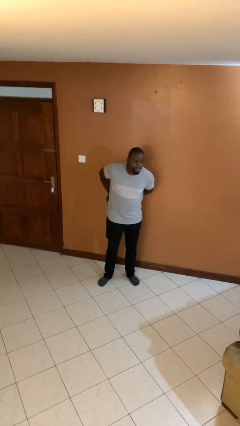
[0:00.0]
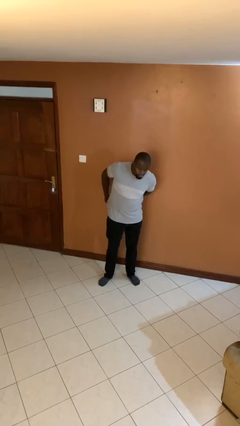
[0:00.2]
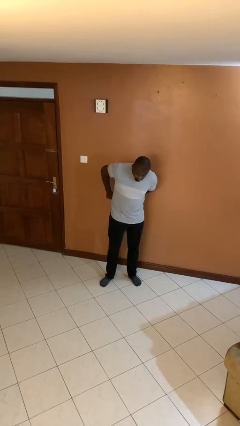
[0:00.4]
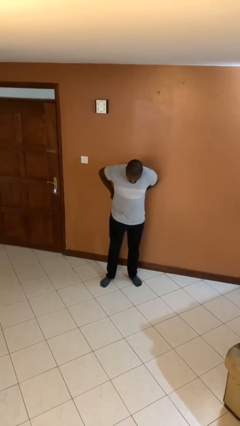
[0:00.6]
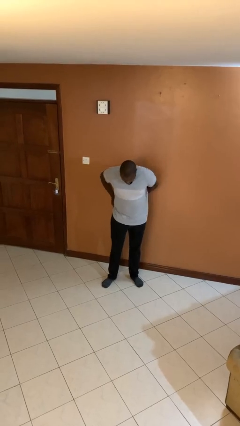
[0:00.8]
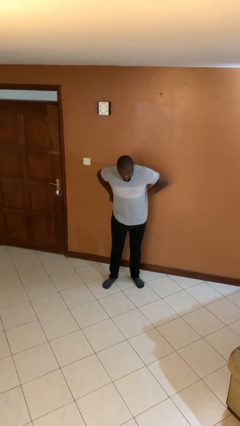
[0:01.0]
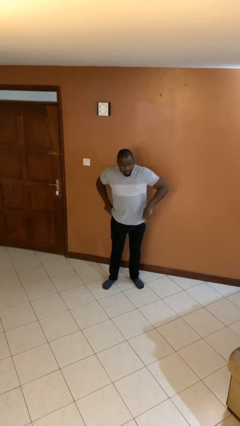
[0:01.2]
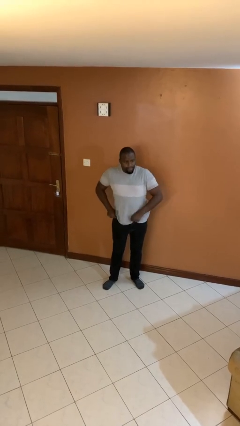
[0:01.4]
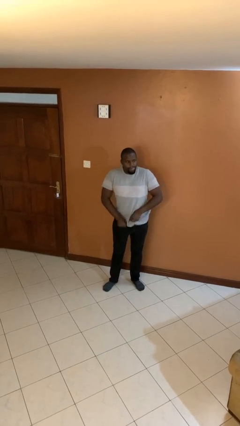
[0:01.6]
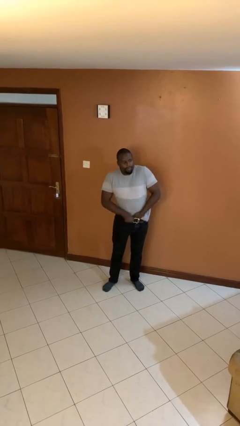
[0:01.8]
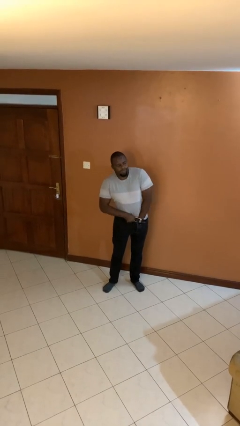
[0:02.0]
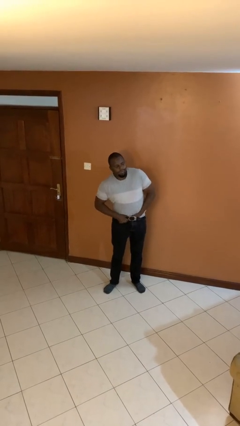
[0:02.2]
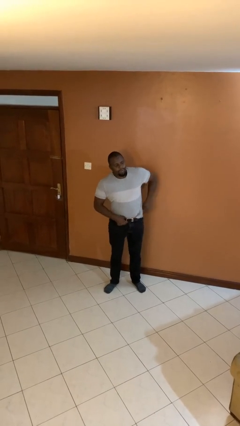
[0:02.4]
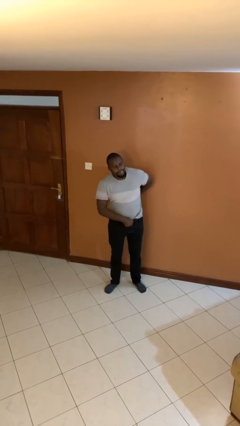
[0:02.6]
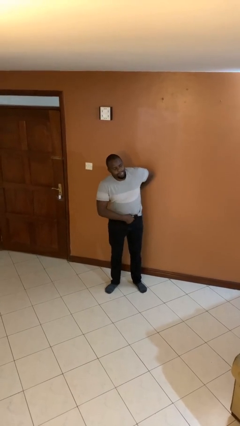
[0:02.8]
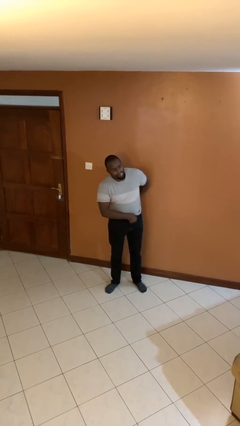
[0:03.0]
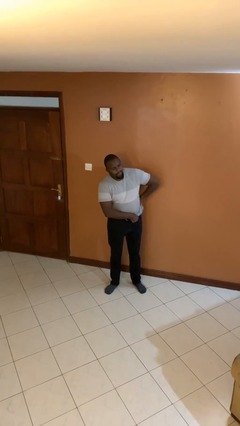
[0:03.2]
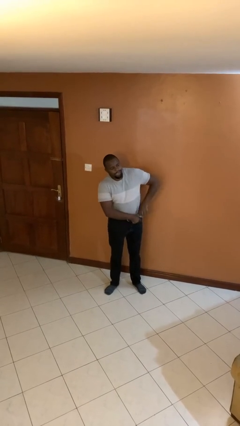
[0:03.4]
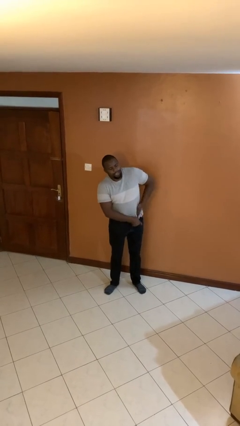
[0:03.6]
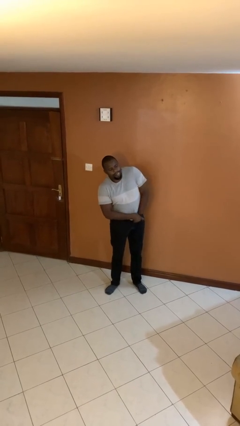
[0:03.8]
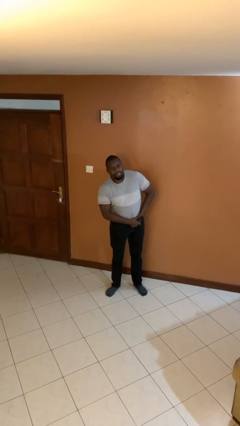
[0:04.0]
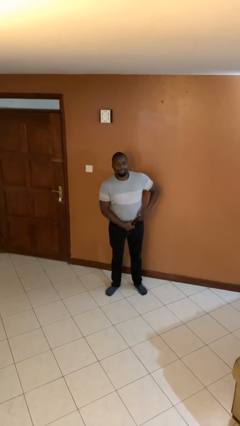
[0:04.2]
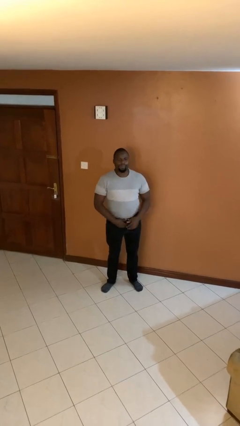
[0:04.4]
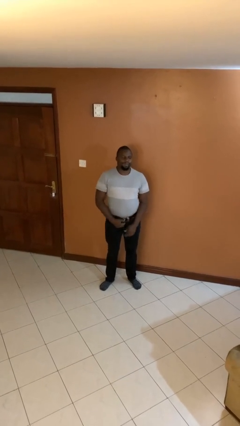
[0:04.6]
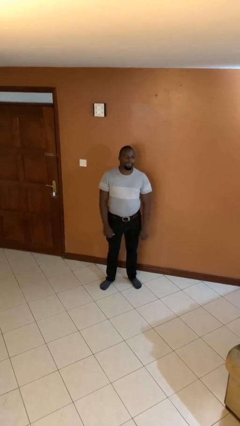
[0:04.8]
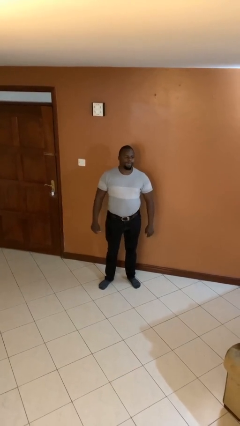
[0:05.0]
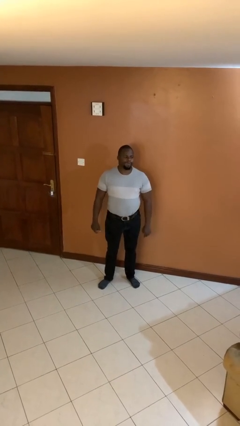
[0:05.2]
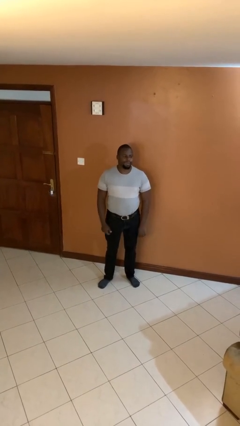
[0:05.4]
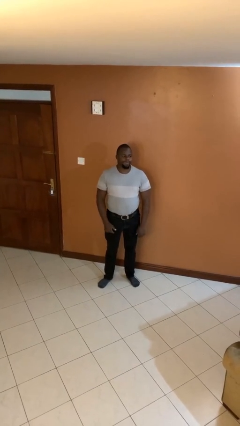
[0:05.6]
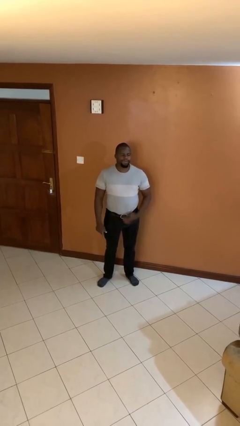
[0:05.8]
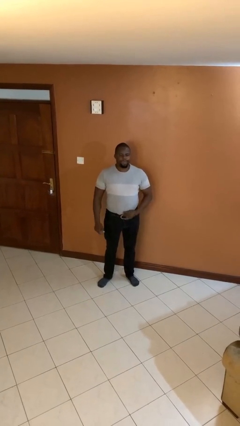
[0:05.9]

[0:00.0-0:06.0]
person tucks in shirt

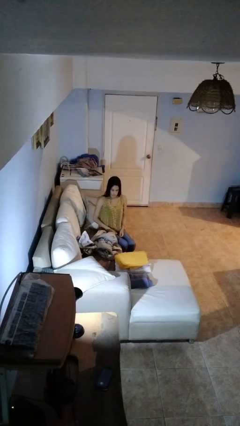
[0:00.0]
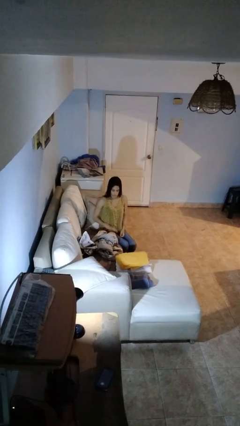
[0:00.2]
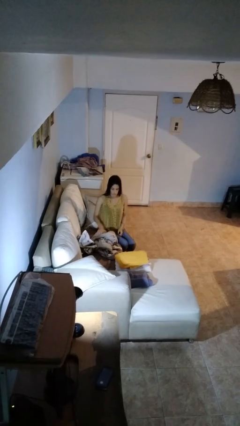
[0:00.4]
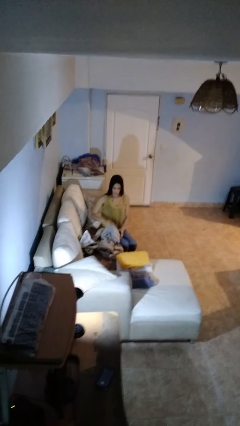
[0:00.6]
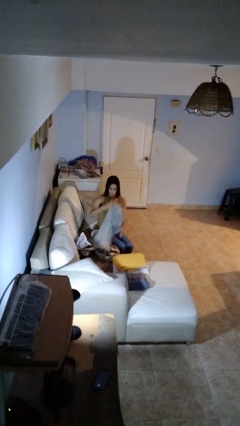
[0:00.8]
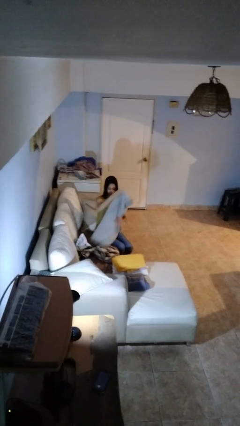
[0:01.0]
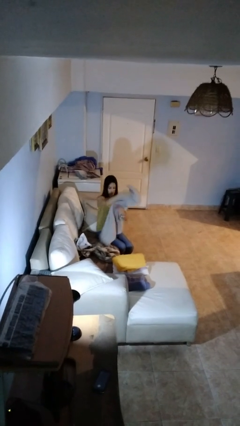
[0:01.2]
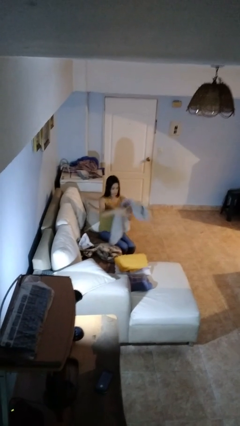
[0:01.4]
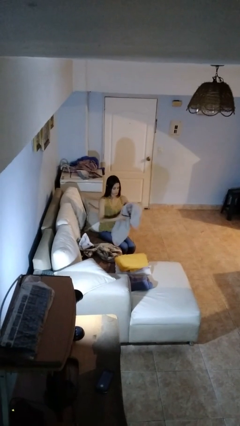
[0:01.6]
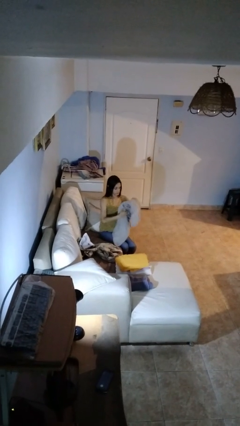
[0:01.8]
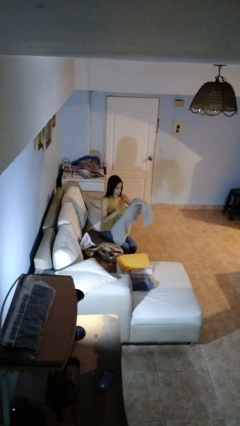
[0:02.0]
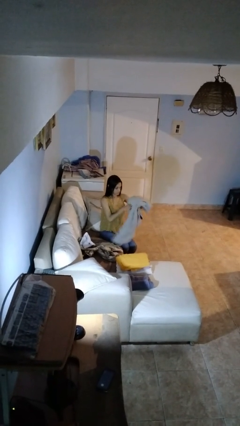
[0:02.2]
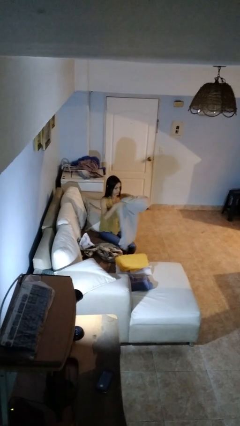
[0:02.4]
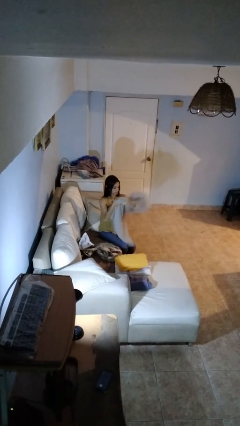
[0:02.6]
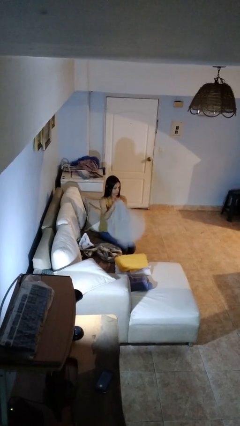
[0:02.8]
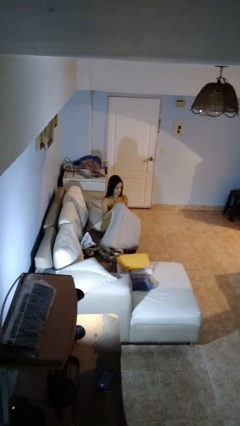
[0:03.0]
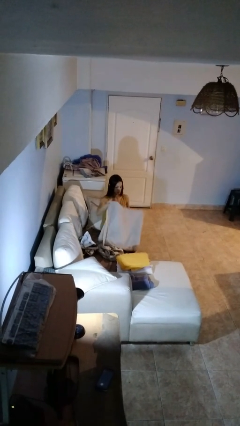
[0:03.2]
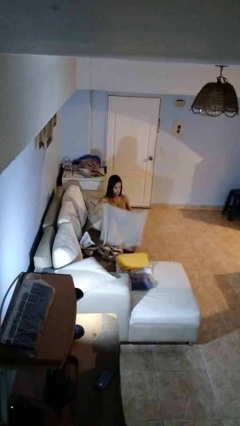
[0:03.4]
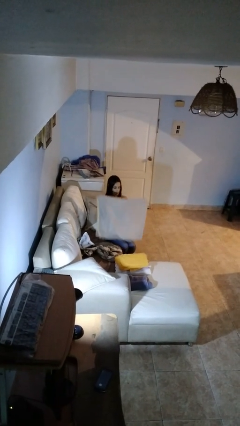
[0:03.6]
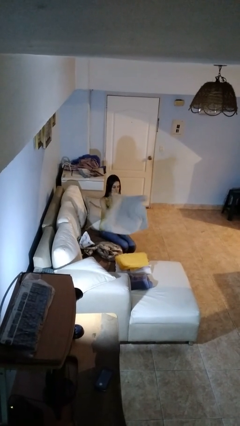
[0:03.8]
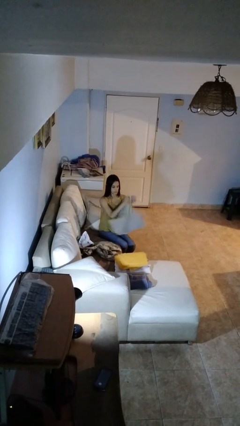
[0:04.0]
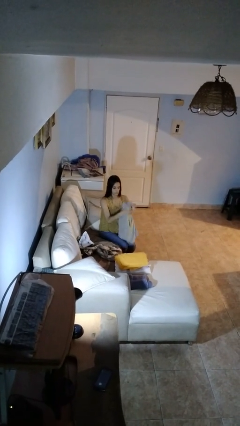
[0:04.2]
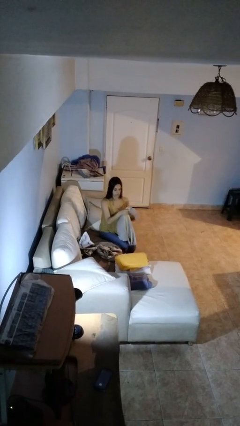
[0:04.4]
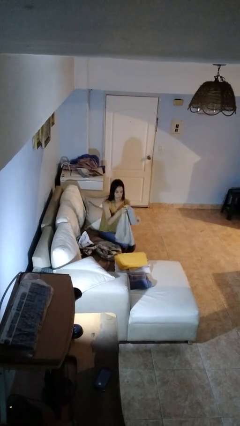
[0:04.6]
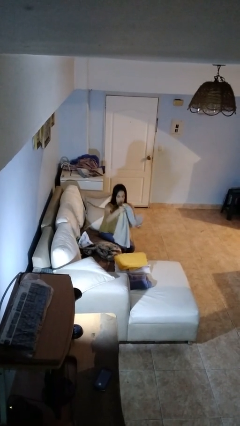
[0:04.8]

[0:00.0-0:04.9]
person folds towel

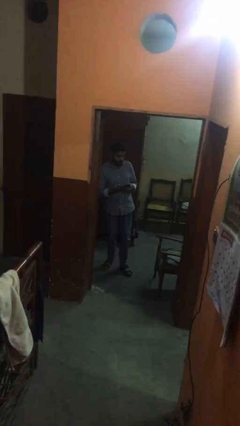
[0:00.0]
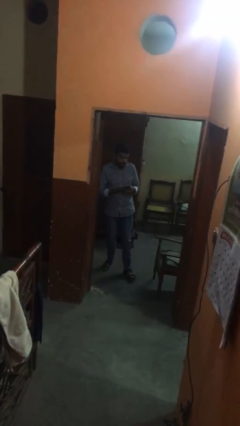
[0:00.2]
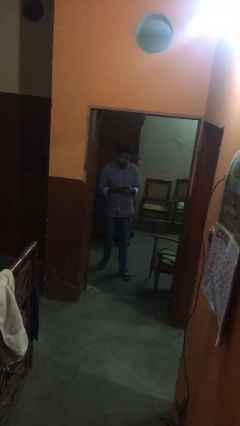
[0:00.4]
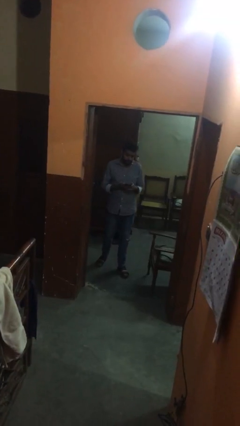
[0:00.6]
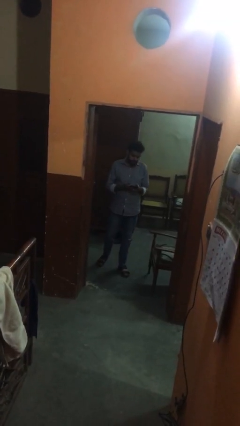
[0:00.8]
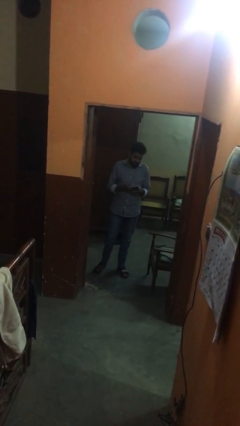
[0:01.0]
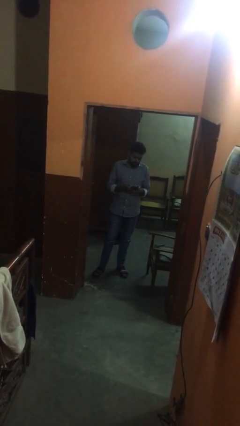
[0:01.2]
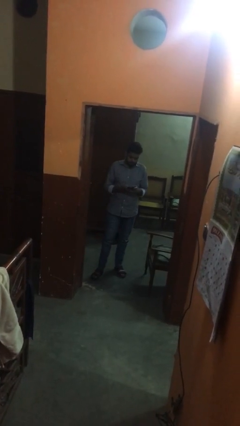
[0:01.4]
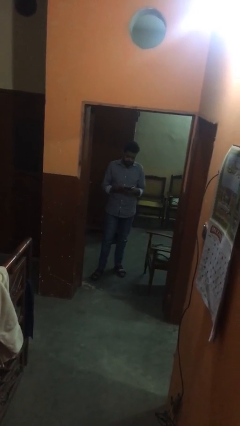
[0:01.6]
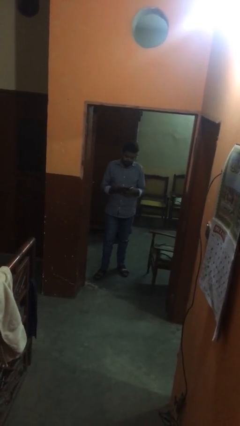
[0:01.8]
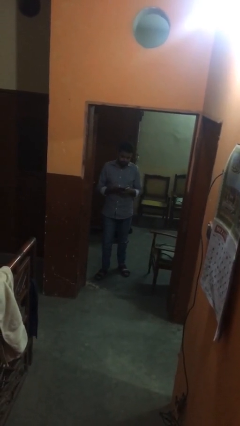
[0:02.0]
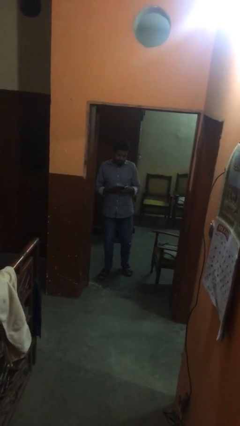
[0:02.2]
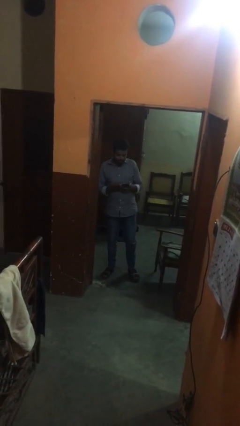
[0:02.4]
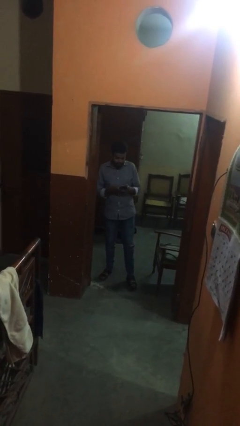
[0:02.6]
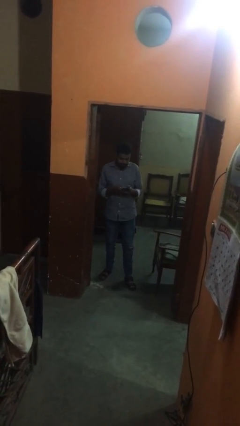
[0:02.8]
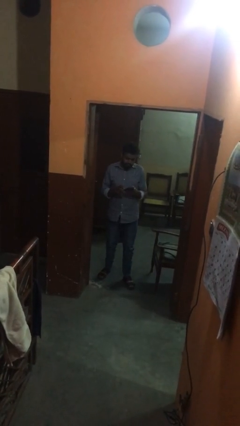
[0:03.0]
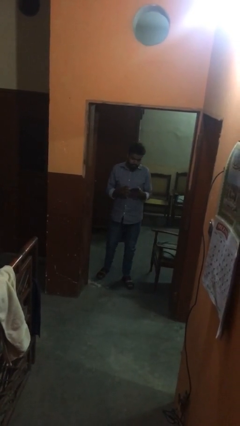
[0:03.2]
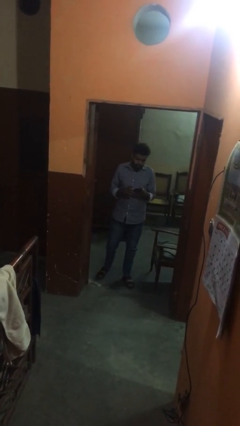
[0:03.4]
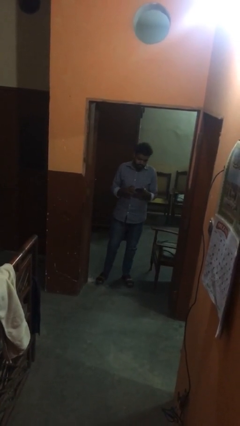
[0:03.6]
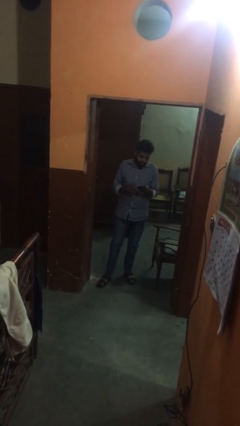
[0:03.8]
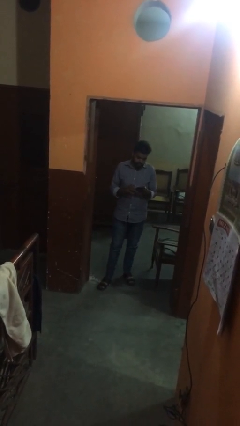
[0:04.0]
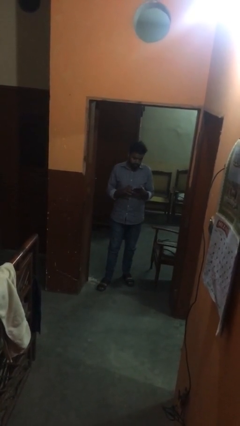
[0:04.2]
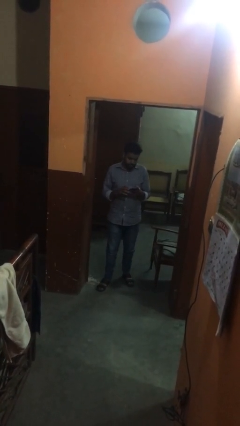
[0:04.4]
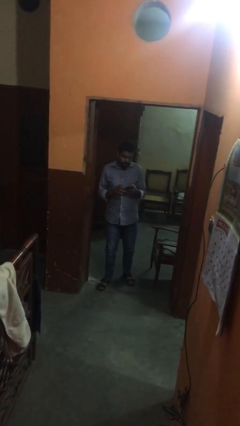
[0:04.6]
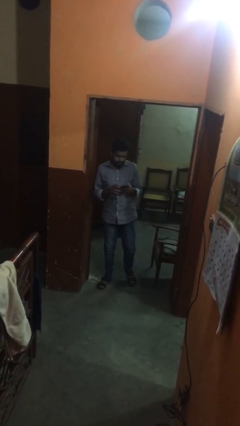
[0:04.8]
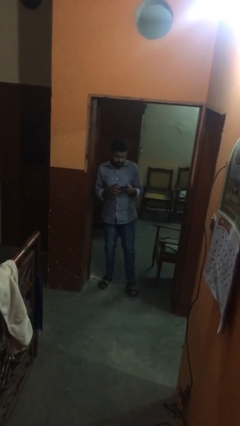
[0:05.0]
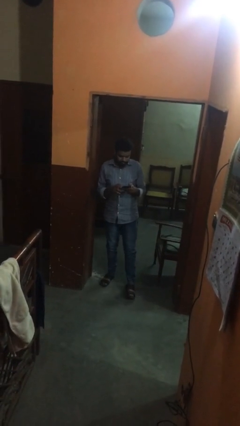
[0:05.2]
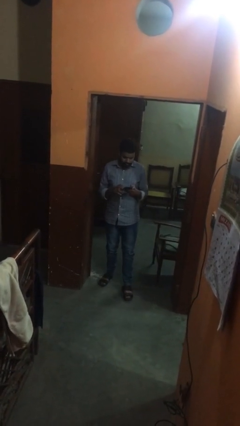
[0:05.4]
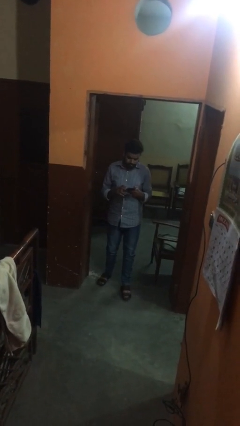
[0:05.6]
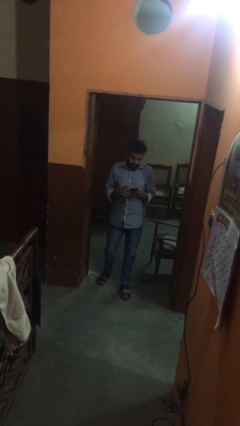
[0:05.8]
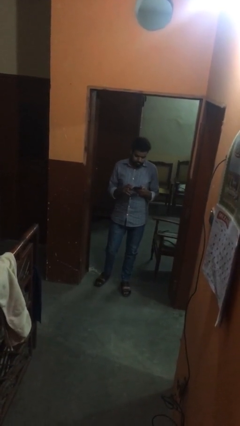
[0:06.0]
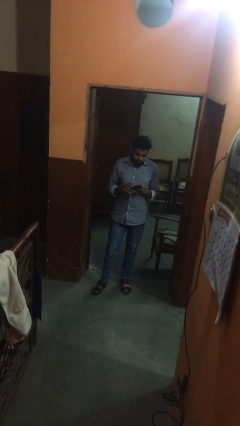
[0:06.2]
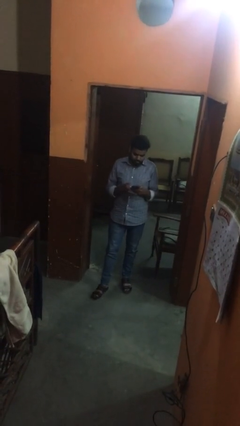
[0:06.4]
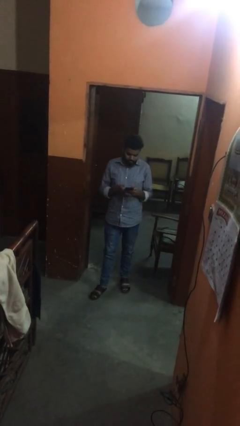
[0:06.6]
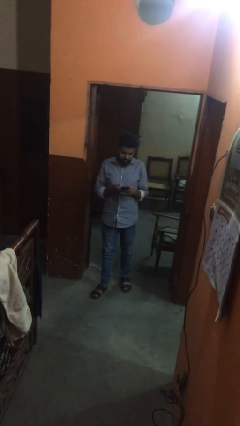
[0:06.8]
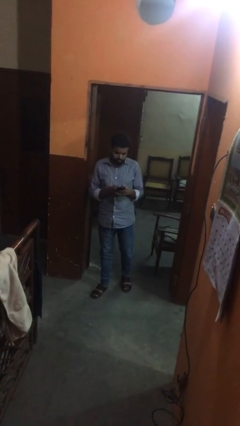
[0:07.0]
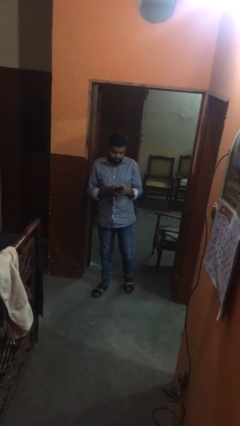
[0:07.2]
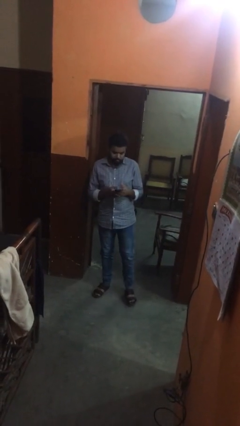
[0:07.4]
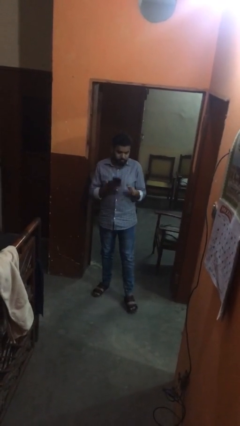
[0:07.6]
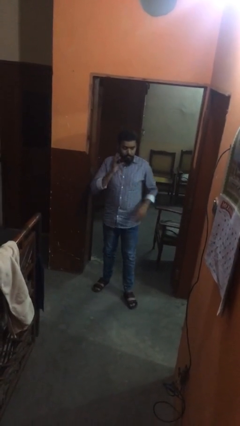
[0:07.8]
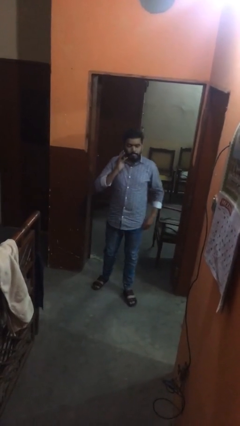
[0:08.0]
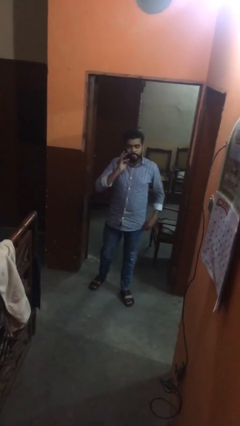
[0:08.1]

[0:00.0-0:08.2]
person texts on phone
